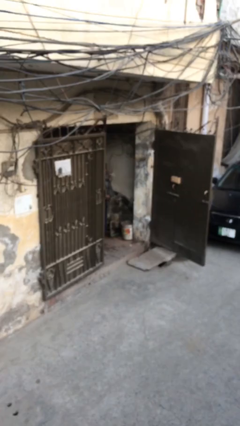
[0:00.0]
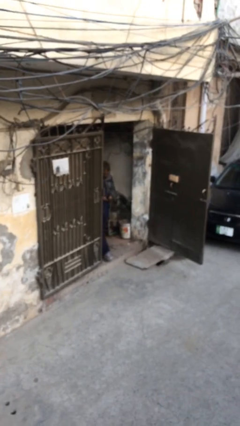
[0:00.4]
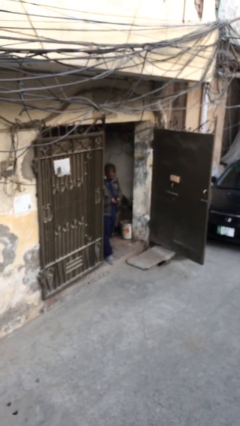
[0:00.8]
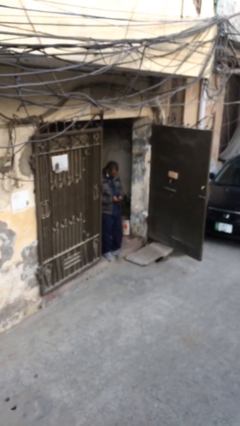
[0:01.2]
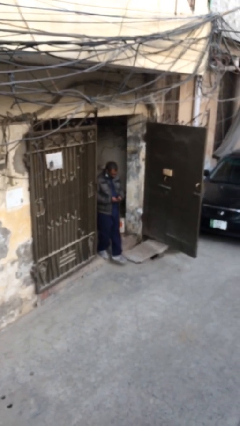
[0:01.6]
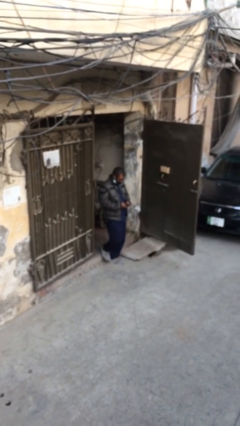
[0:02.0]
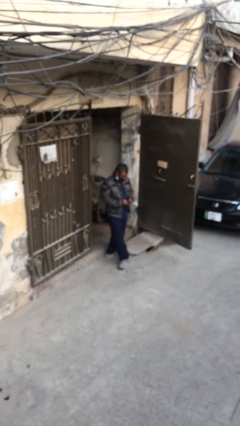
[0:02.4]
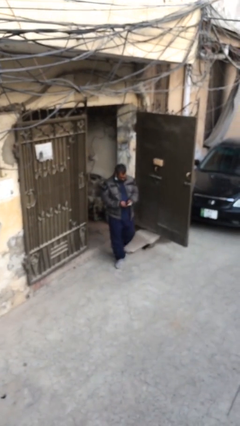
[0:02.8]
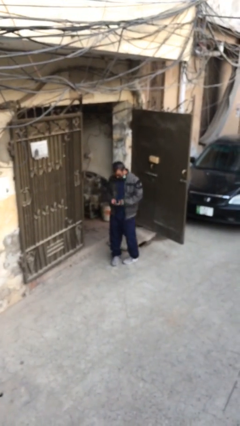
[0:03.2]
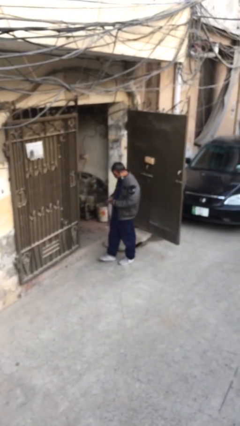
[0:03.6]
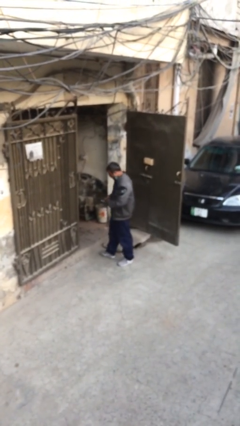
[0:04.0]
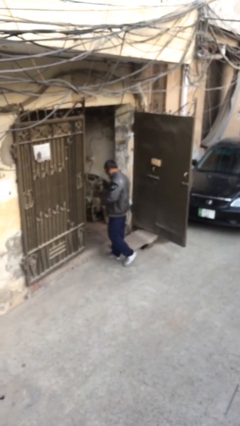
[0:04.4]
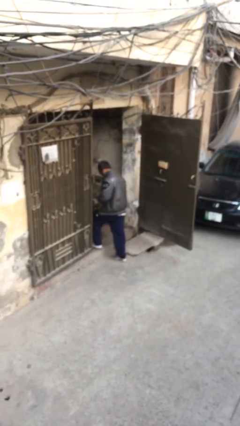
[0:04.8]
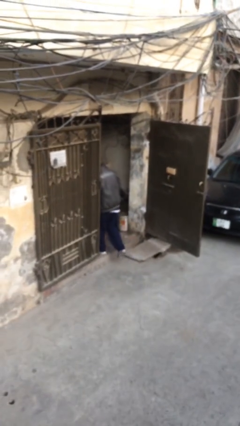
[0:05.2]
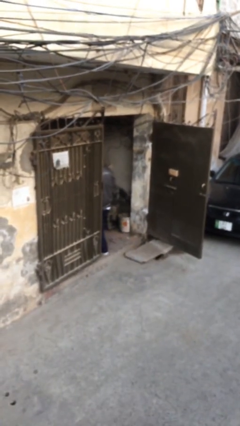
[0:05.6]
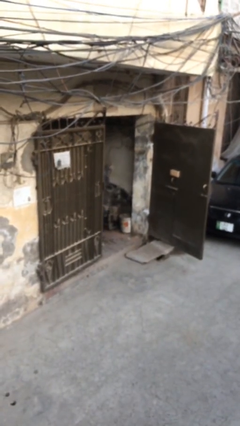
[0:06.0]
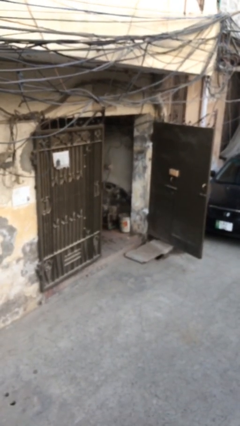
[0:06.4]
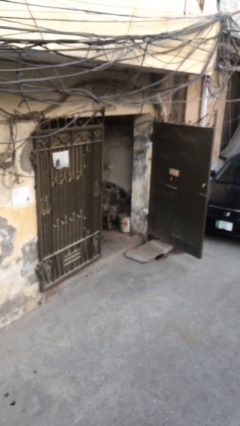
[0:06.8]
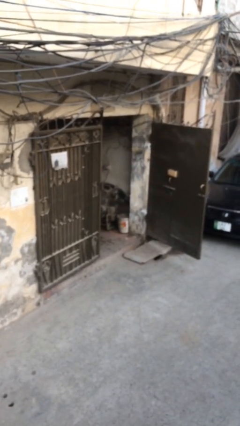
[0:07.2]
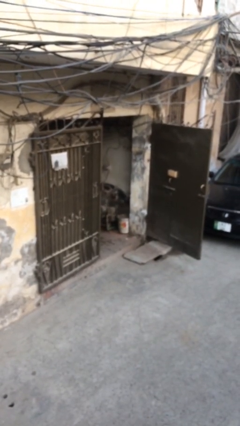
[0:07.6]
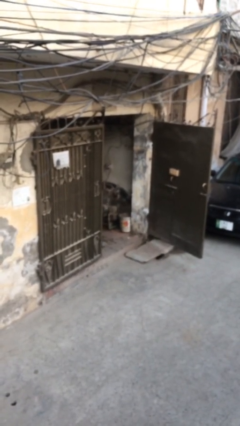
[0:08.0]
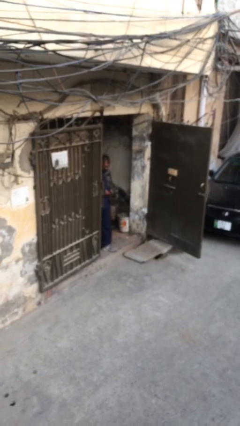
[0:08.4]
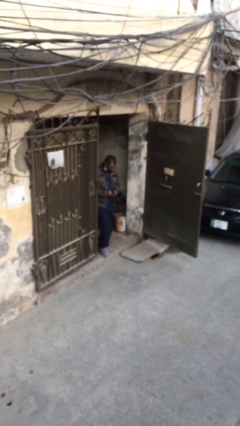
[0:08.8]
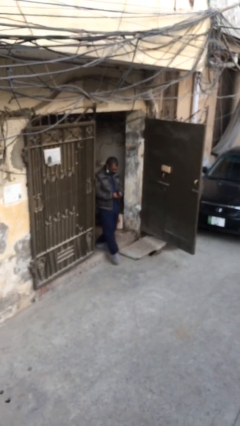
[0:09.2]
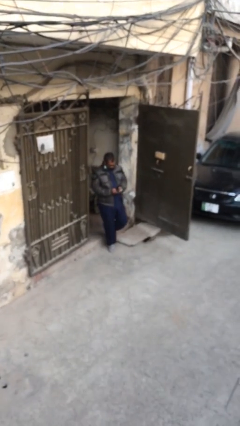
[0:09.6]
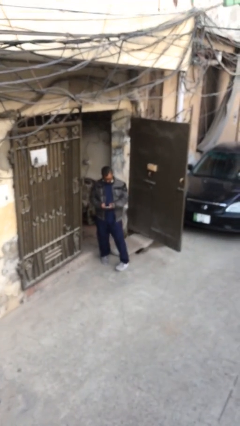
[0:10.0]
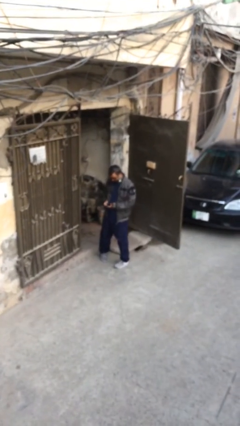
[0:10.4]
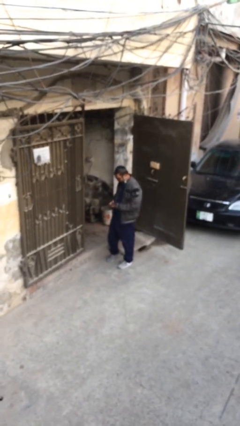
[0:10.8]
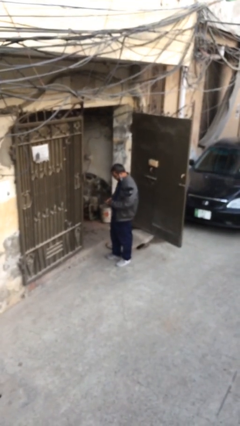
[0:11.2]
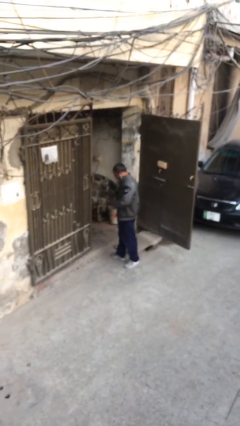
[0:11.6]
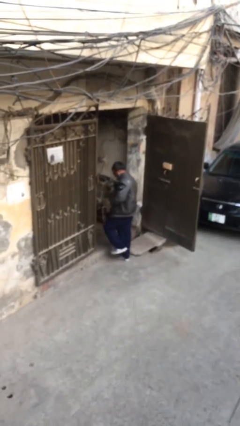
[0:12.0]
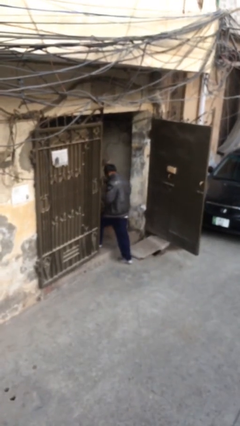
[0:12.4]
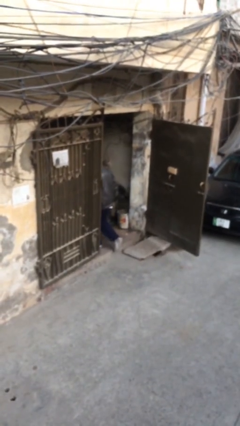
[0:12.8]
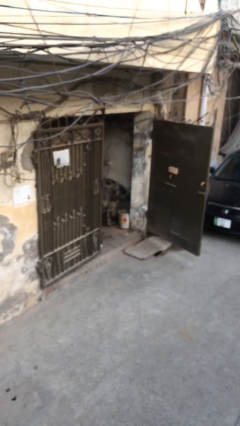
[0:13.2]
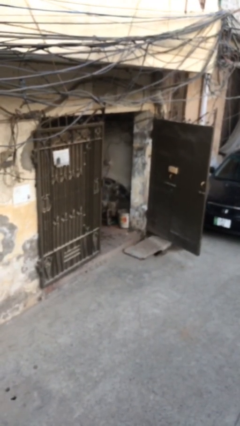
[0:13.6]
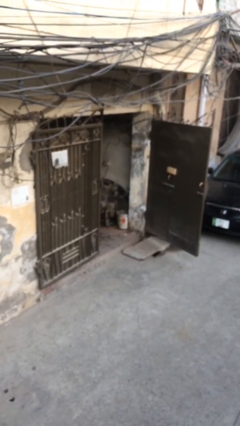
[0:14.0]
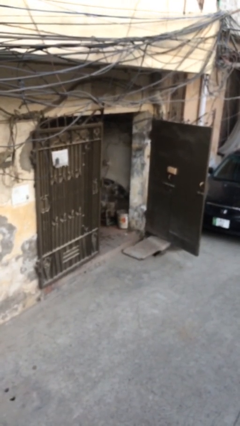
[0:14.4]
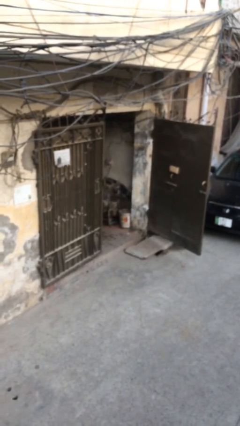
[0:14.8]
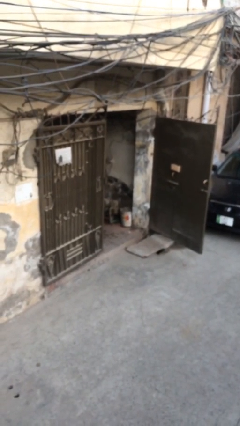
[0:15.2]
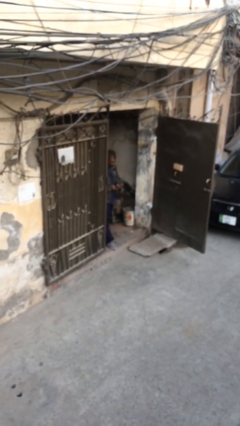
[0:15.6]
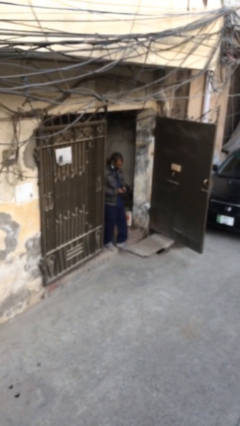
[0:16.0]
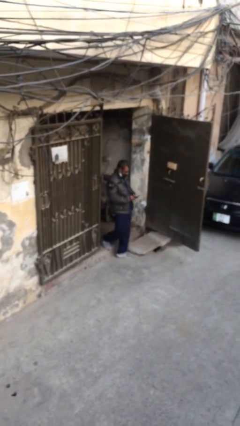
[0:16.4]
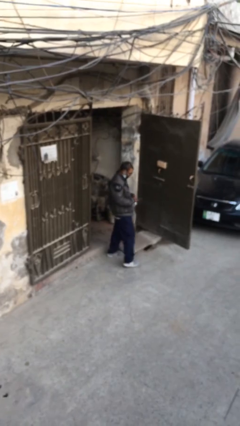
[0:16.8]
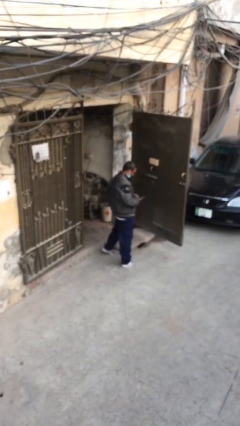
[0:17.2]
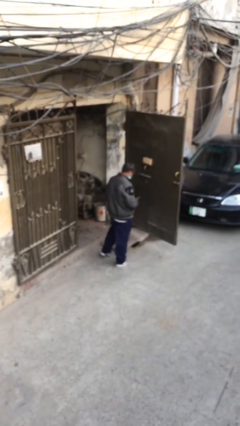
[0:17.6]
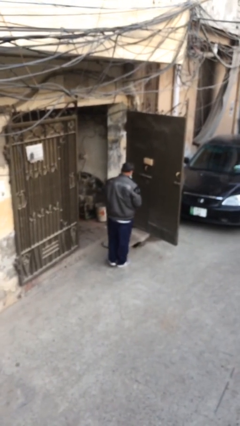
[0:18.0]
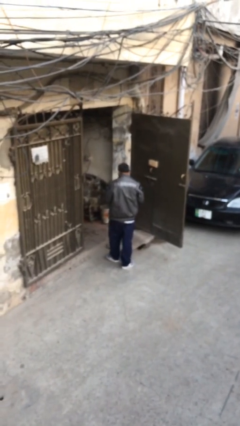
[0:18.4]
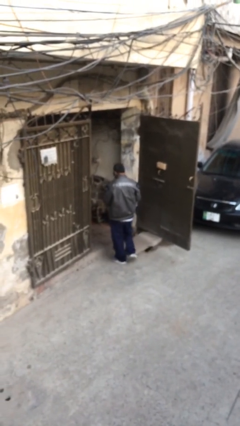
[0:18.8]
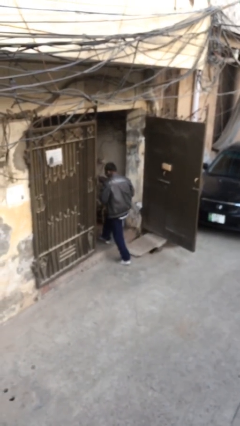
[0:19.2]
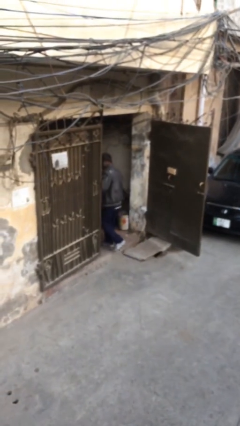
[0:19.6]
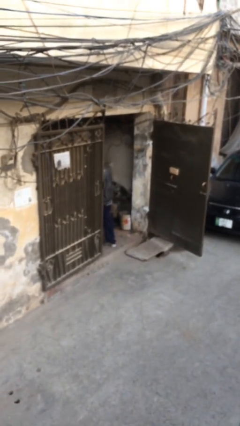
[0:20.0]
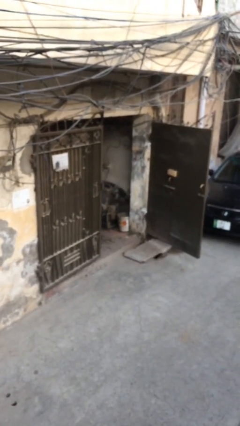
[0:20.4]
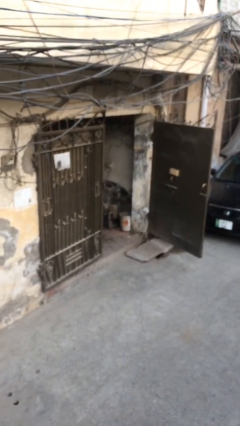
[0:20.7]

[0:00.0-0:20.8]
person texts on phone

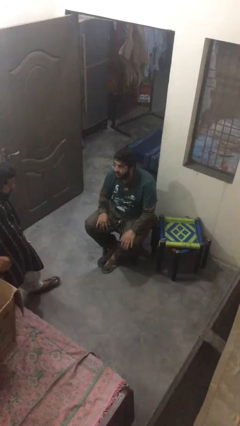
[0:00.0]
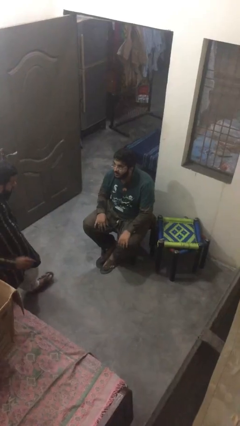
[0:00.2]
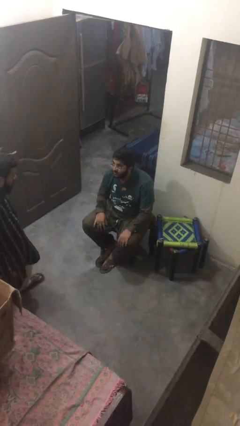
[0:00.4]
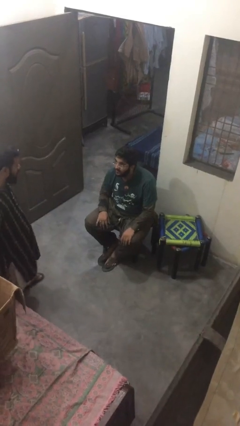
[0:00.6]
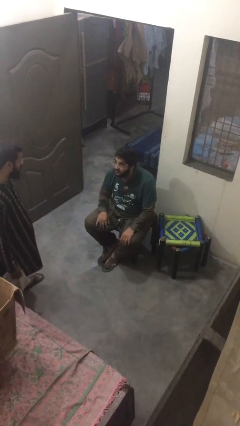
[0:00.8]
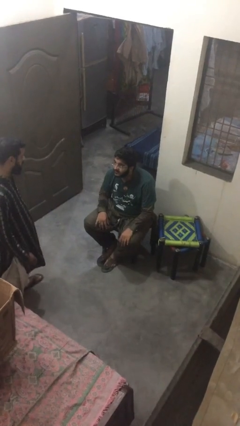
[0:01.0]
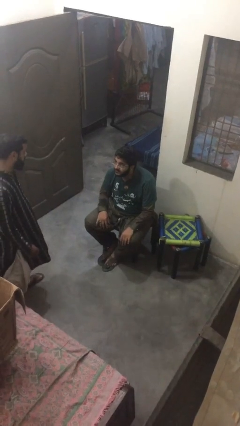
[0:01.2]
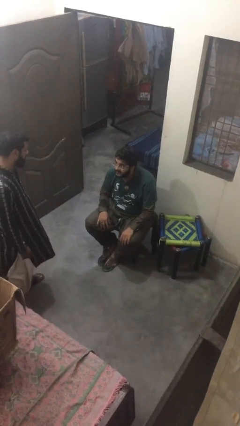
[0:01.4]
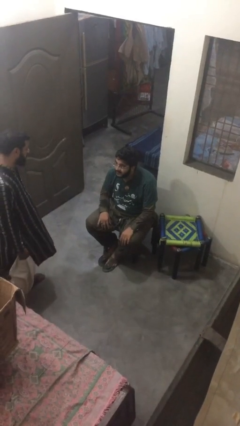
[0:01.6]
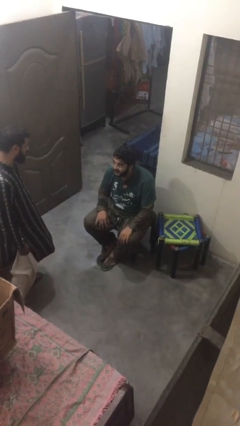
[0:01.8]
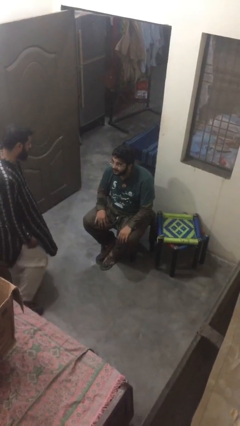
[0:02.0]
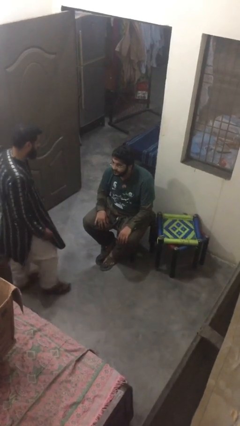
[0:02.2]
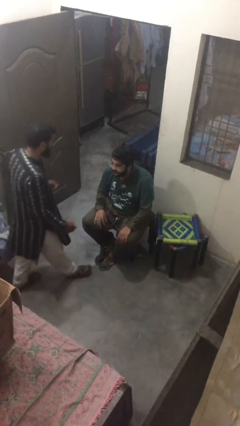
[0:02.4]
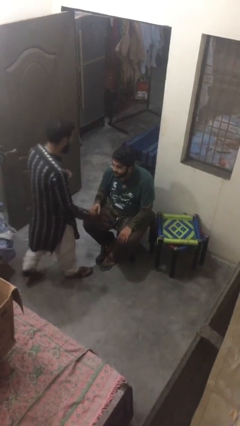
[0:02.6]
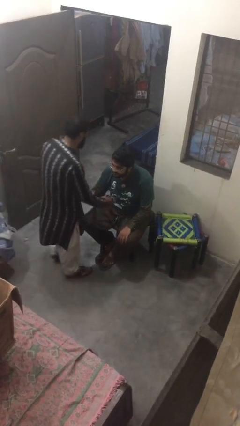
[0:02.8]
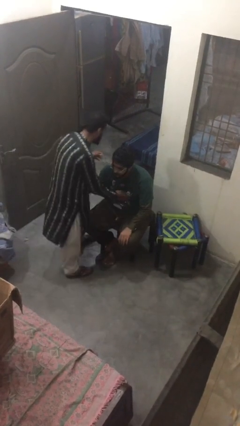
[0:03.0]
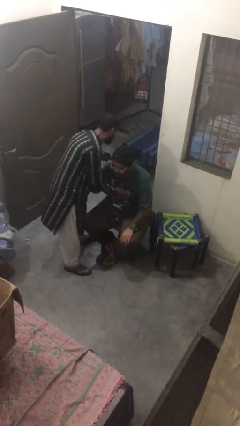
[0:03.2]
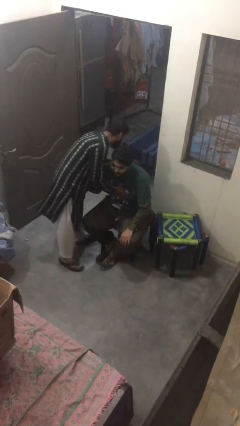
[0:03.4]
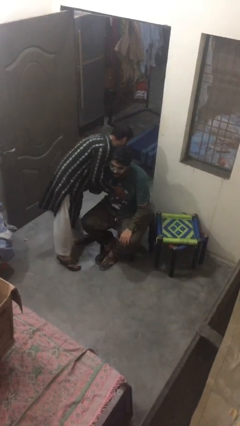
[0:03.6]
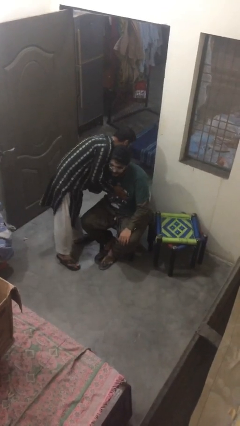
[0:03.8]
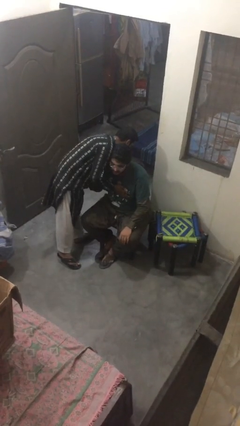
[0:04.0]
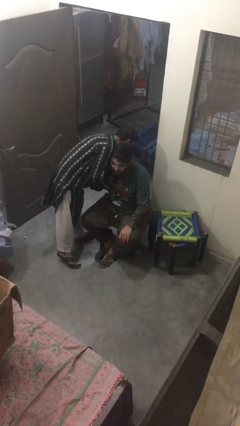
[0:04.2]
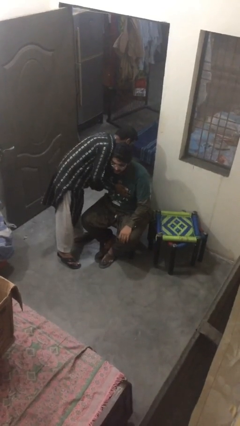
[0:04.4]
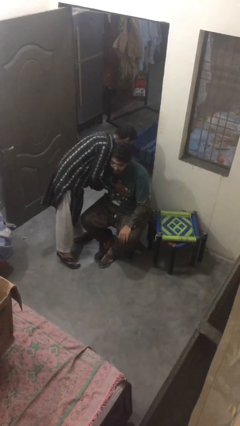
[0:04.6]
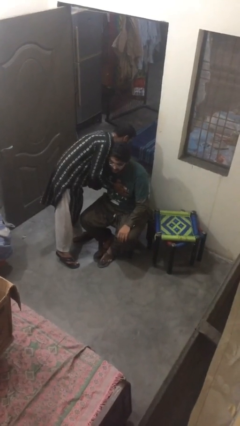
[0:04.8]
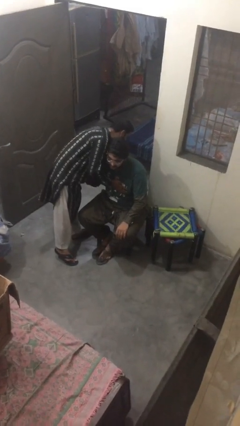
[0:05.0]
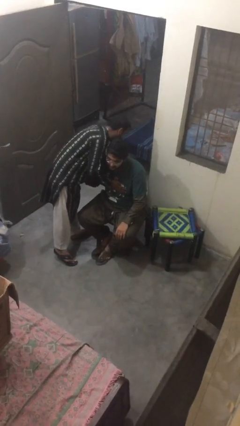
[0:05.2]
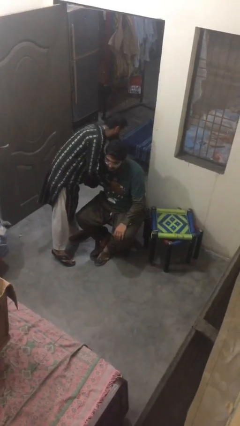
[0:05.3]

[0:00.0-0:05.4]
person embraces person

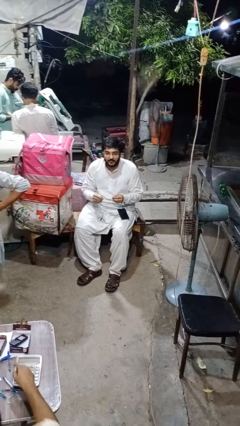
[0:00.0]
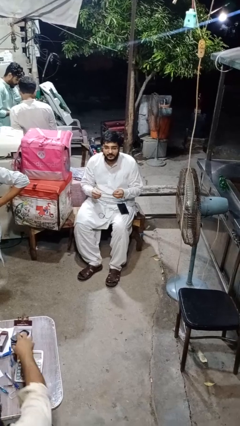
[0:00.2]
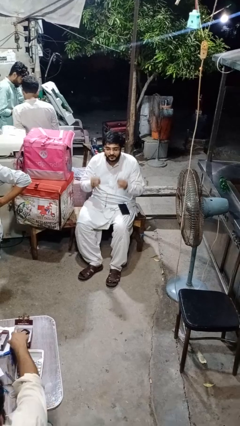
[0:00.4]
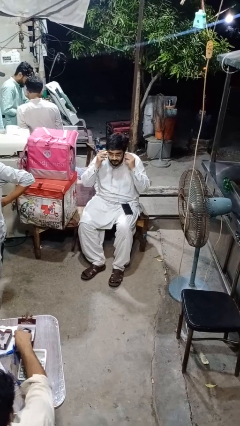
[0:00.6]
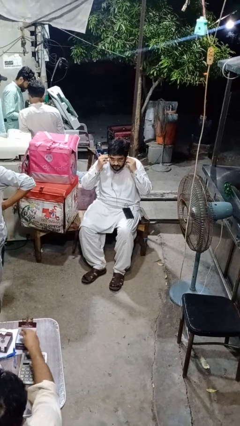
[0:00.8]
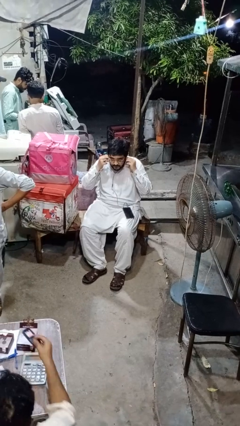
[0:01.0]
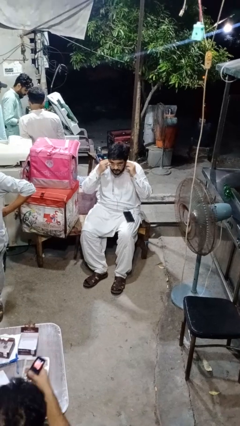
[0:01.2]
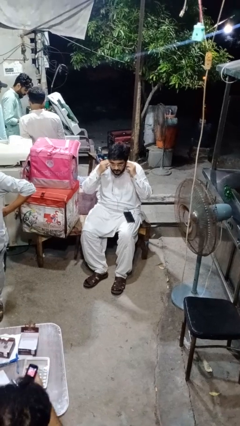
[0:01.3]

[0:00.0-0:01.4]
person puts on headphones

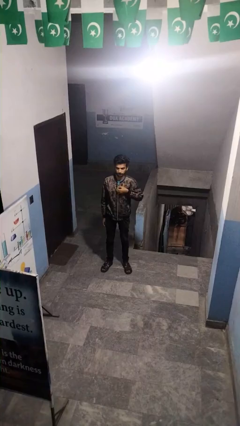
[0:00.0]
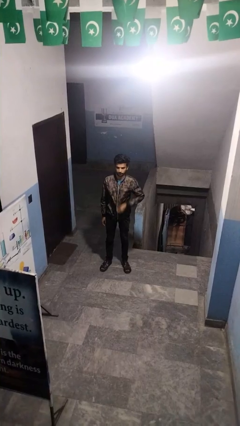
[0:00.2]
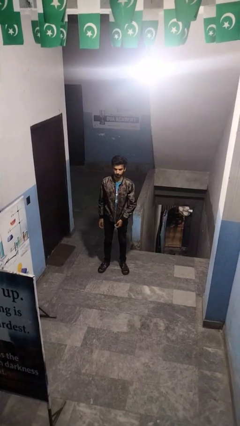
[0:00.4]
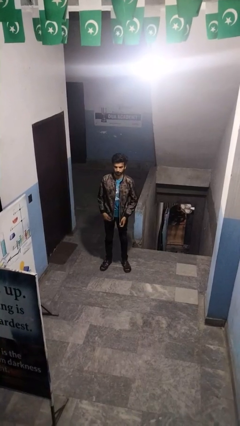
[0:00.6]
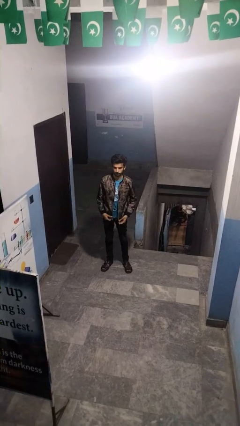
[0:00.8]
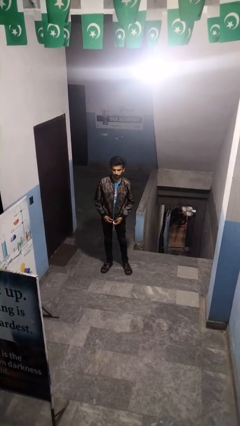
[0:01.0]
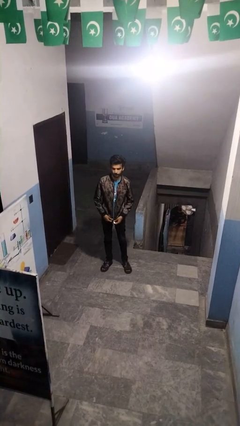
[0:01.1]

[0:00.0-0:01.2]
person unzips jacket
